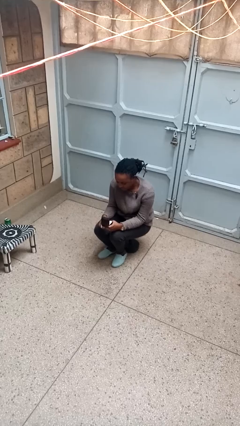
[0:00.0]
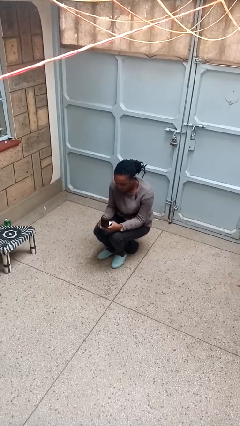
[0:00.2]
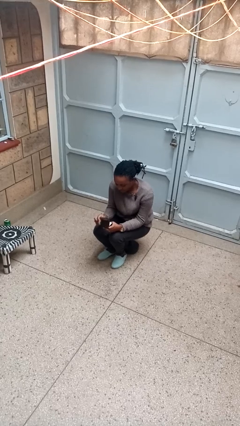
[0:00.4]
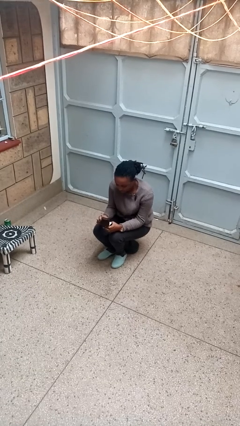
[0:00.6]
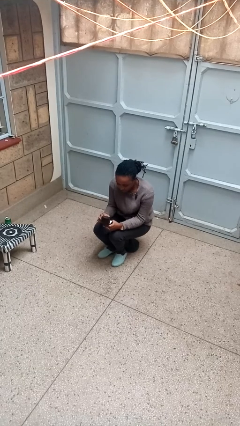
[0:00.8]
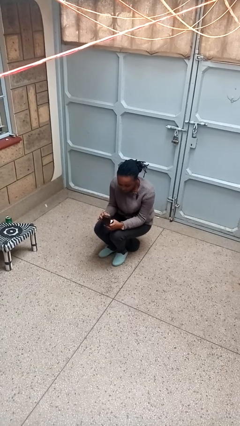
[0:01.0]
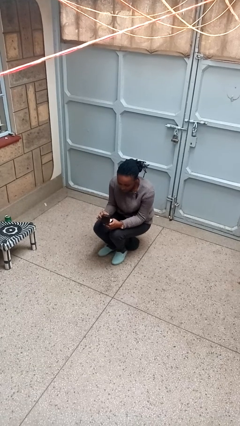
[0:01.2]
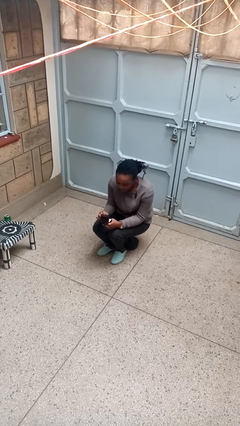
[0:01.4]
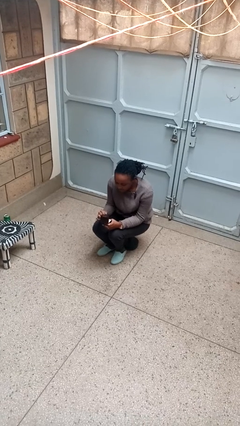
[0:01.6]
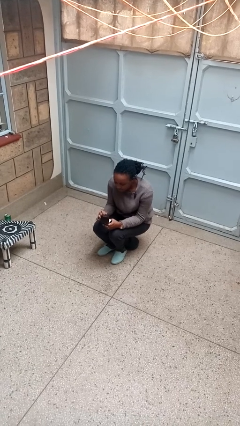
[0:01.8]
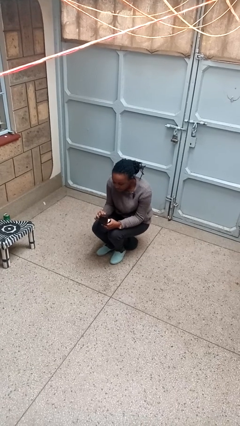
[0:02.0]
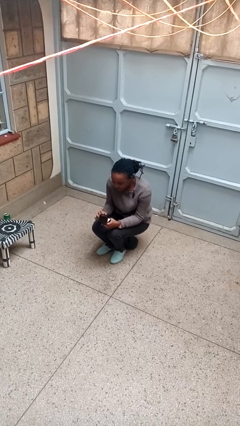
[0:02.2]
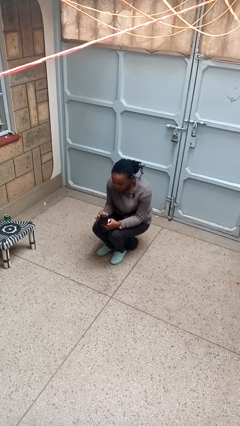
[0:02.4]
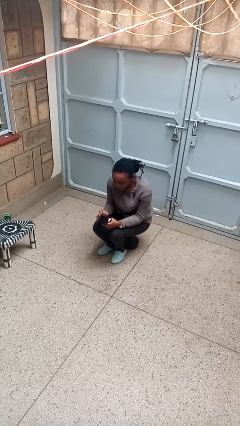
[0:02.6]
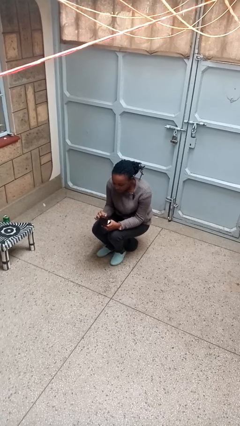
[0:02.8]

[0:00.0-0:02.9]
person searches jewelry box

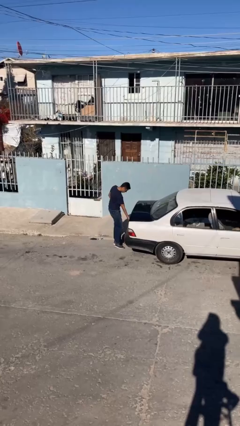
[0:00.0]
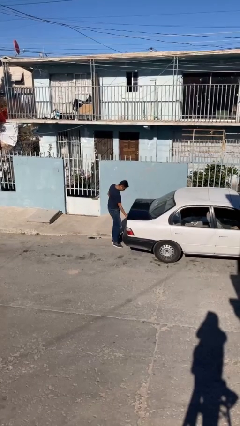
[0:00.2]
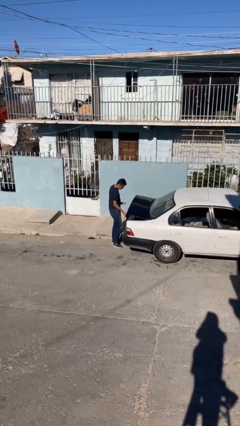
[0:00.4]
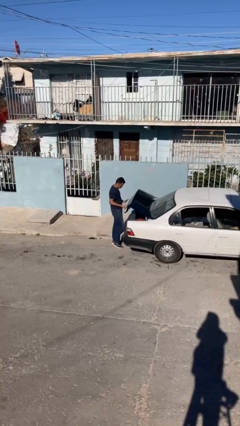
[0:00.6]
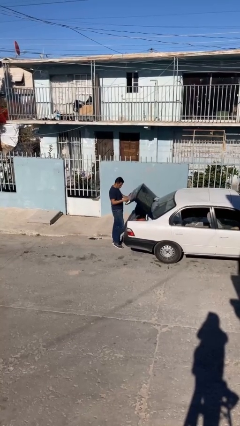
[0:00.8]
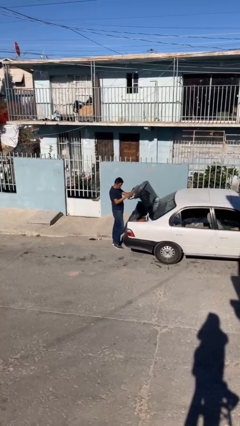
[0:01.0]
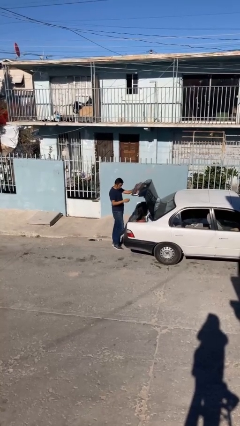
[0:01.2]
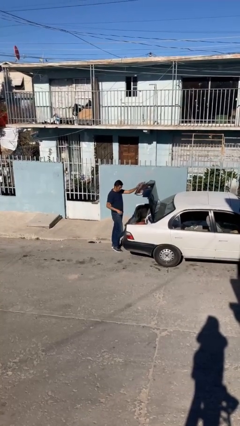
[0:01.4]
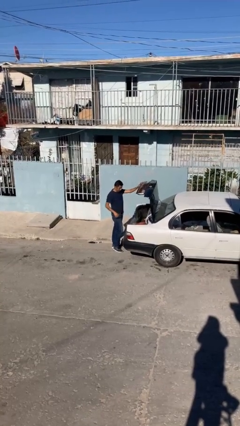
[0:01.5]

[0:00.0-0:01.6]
person enters car

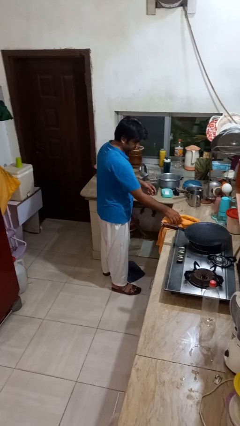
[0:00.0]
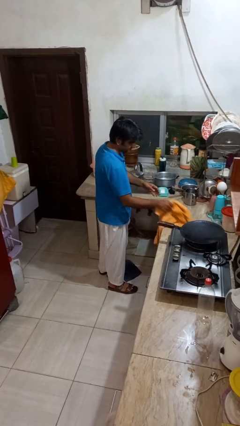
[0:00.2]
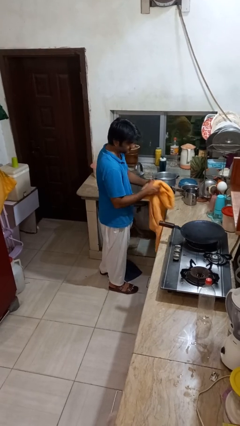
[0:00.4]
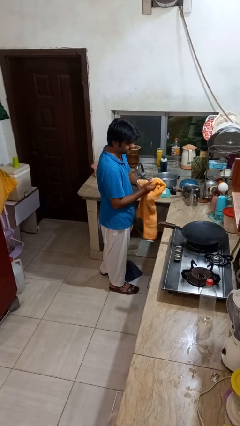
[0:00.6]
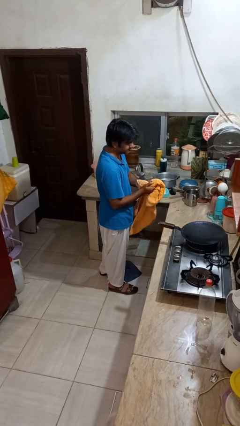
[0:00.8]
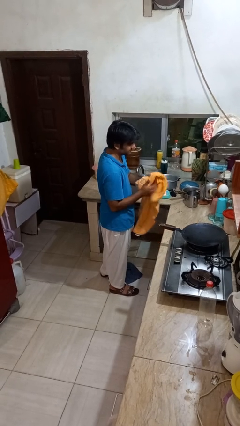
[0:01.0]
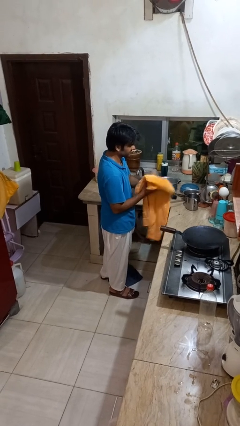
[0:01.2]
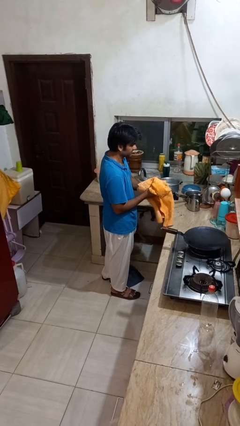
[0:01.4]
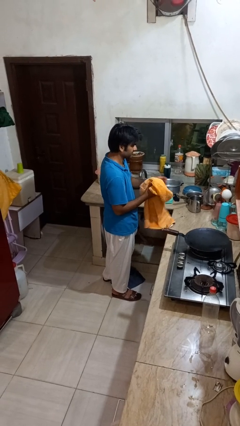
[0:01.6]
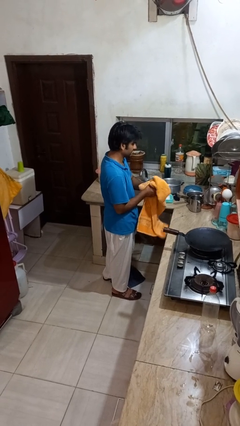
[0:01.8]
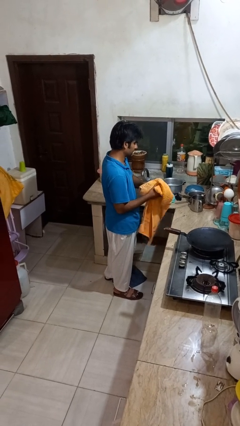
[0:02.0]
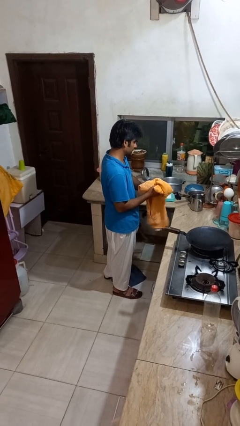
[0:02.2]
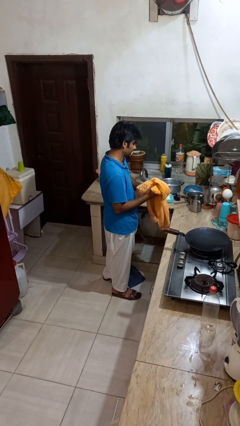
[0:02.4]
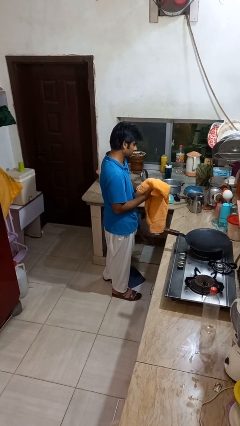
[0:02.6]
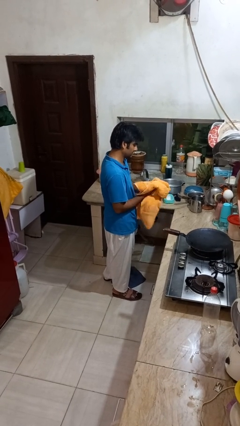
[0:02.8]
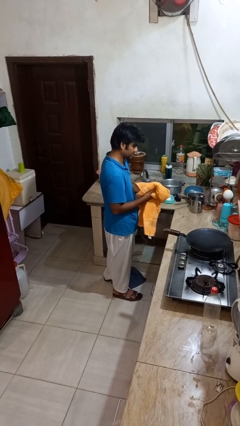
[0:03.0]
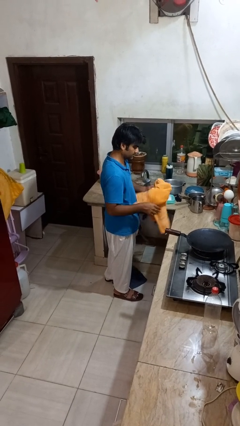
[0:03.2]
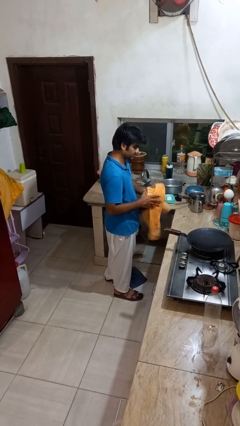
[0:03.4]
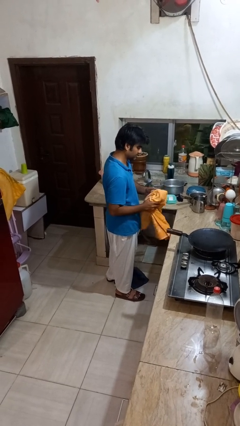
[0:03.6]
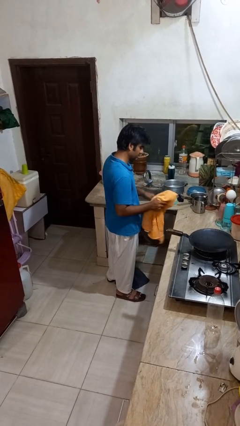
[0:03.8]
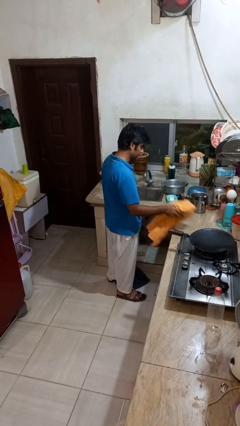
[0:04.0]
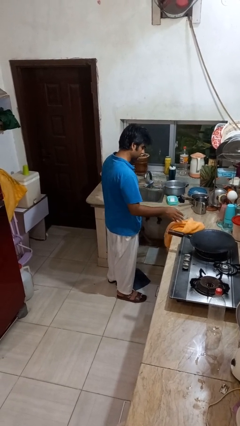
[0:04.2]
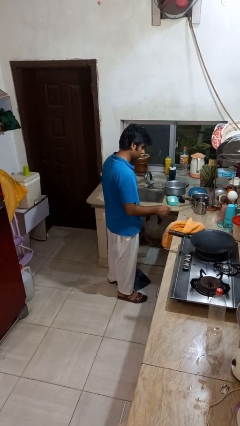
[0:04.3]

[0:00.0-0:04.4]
person dries hands with towel

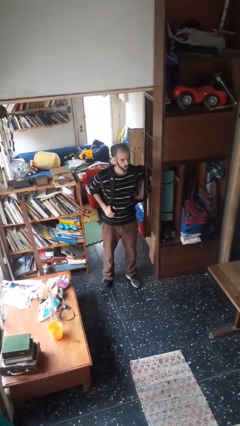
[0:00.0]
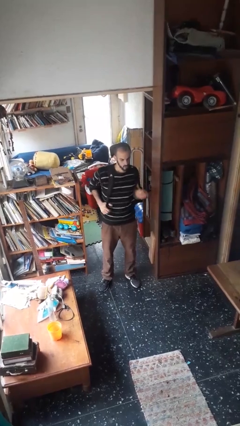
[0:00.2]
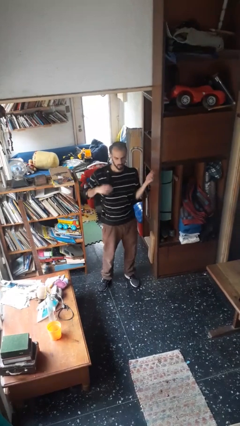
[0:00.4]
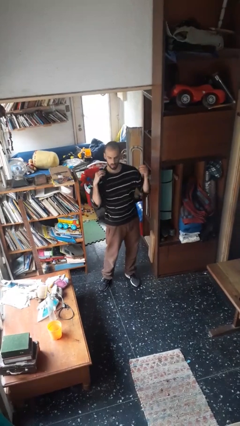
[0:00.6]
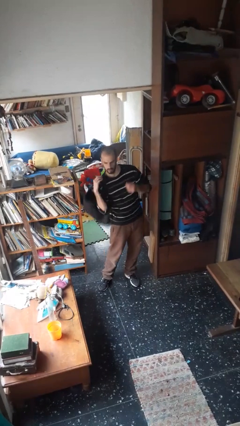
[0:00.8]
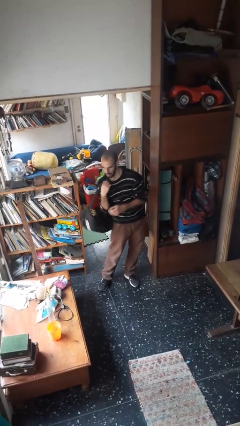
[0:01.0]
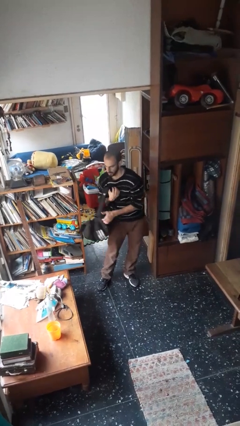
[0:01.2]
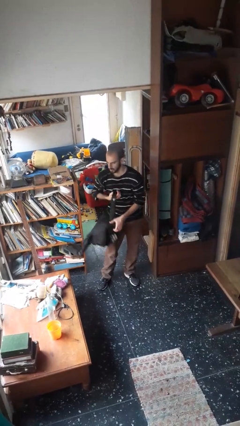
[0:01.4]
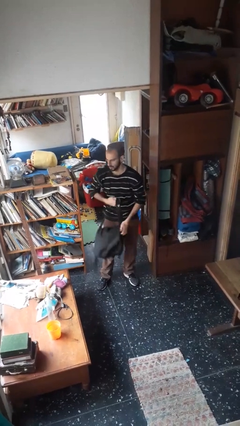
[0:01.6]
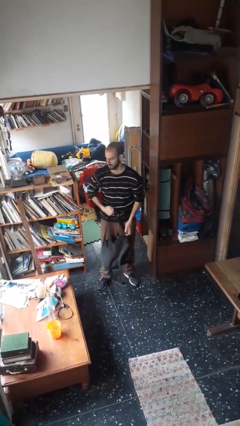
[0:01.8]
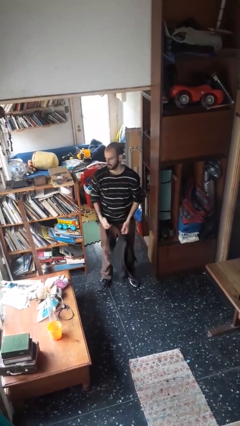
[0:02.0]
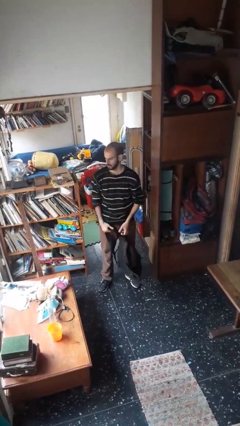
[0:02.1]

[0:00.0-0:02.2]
person takes off backpack

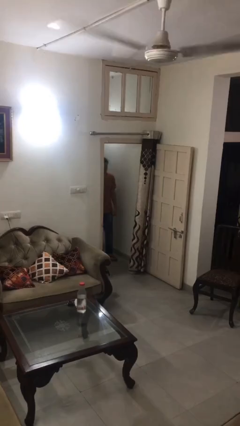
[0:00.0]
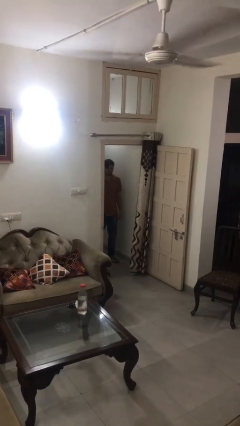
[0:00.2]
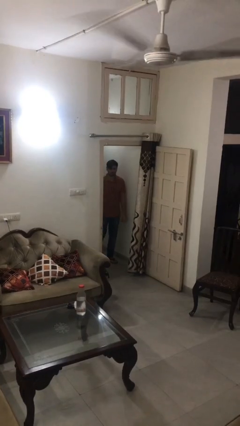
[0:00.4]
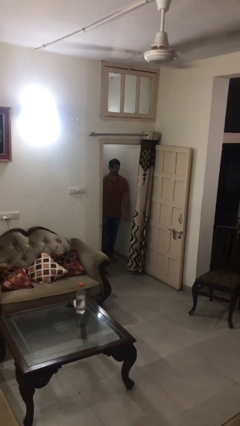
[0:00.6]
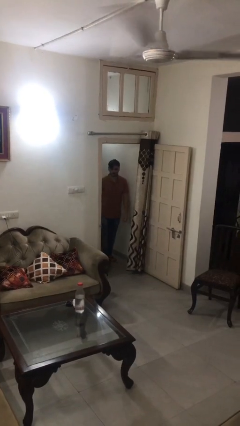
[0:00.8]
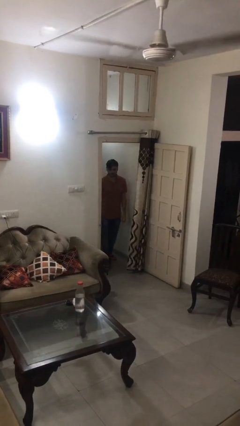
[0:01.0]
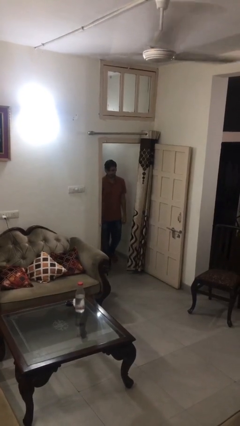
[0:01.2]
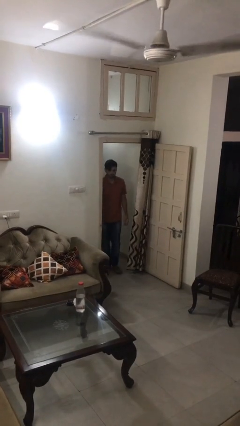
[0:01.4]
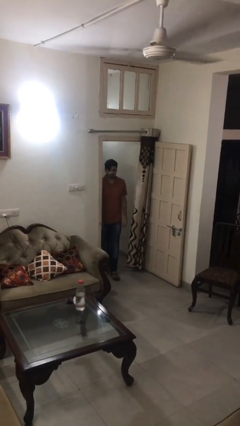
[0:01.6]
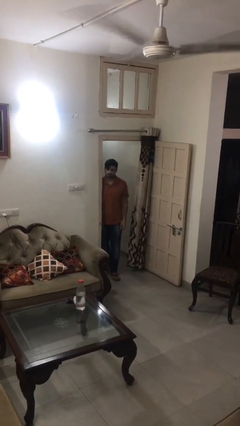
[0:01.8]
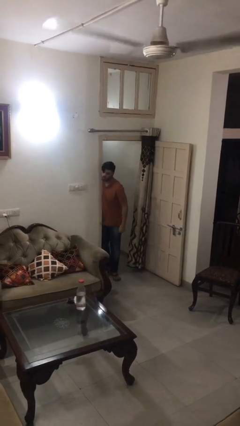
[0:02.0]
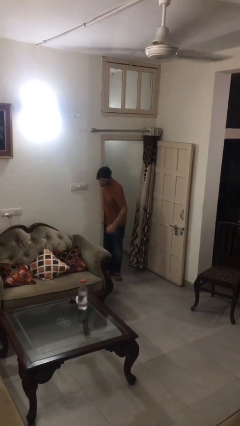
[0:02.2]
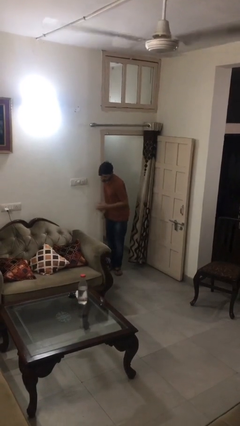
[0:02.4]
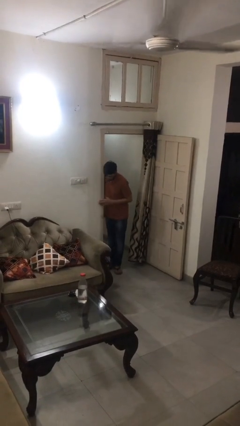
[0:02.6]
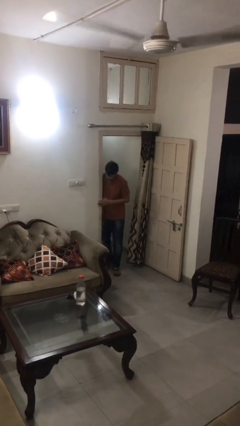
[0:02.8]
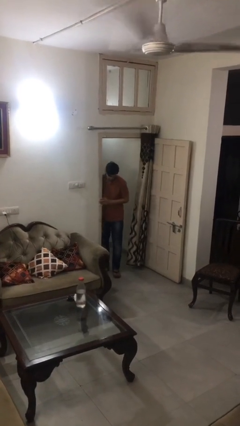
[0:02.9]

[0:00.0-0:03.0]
person bumps into wall

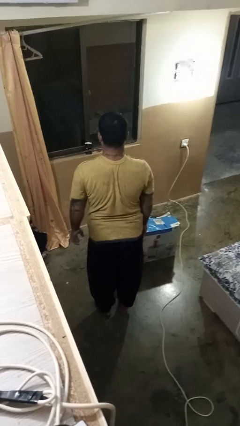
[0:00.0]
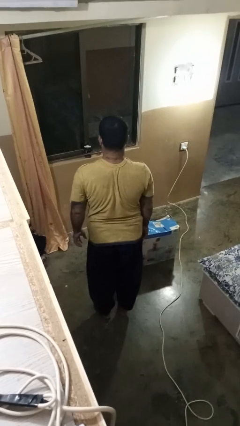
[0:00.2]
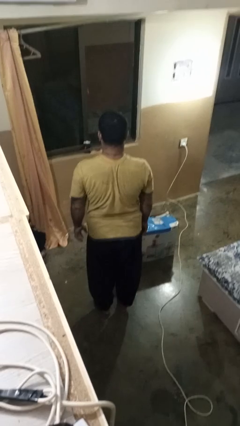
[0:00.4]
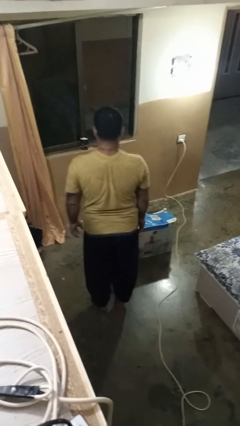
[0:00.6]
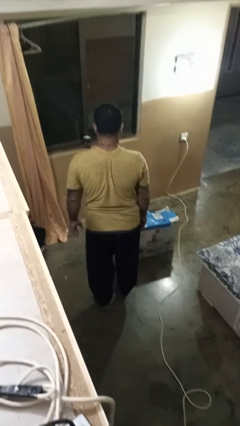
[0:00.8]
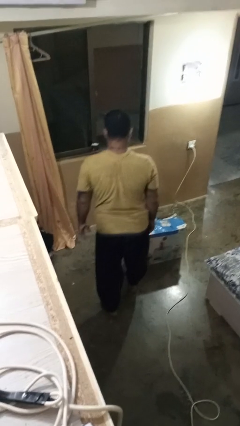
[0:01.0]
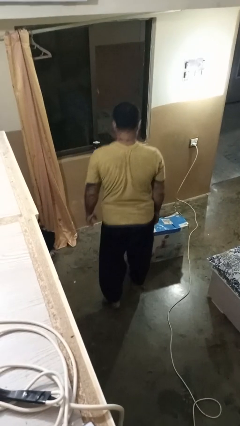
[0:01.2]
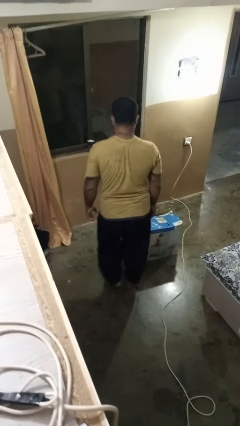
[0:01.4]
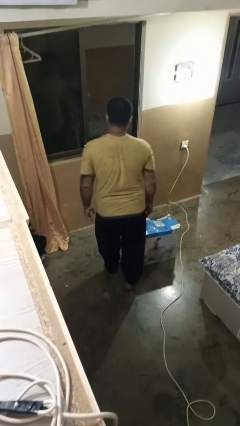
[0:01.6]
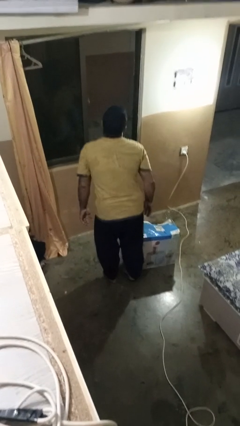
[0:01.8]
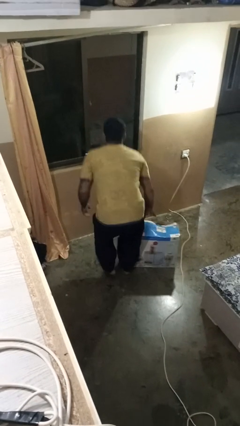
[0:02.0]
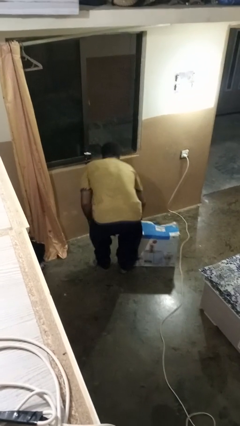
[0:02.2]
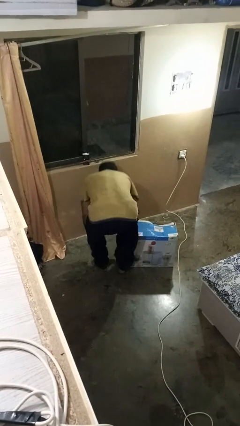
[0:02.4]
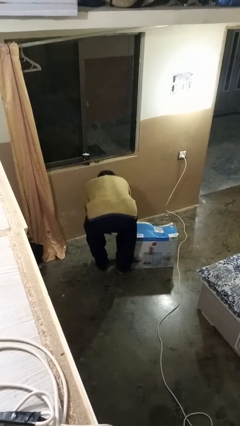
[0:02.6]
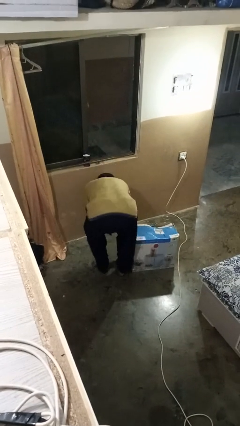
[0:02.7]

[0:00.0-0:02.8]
person trips on object on floor

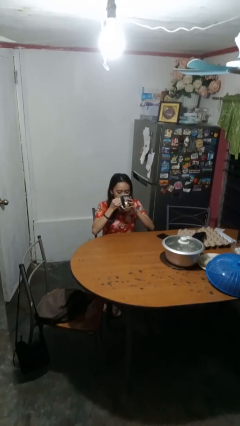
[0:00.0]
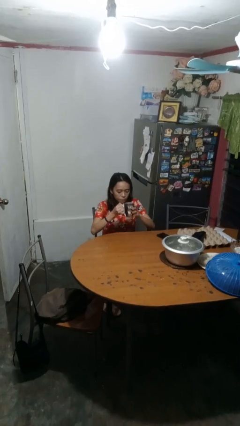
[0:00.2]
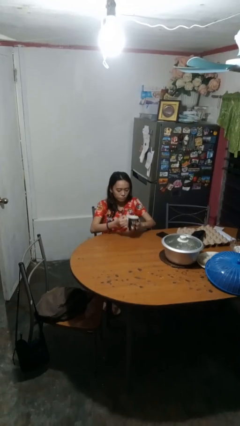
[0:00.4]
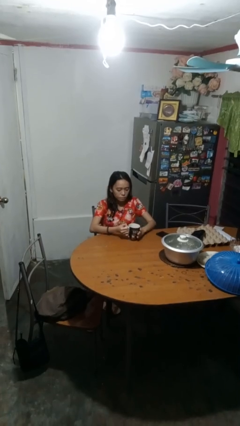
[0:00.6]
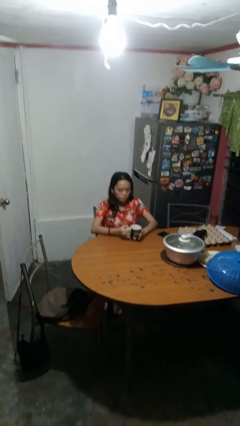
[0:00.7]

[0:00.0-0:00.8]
person puts down object on table
